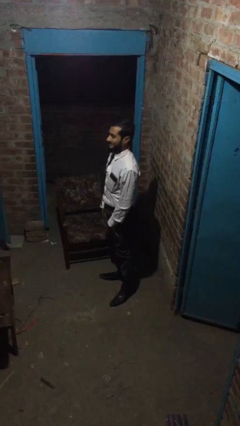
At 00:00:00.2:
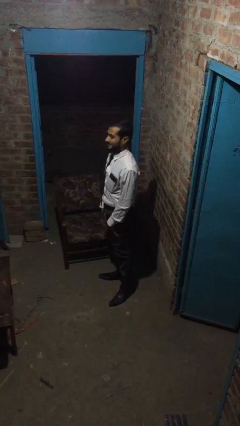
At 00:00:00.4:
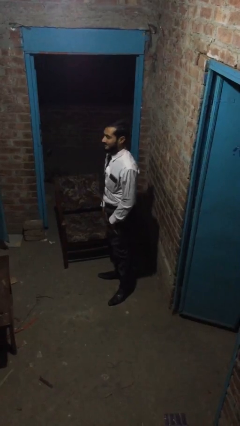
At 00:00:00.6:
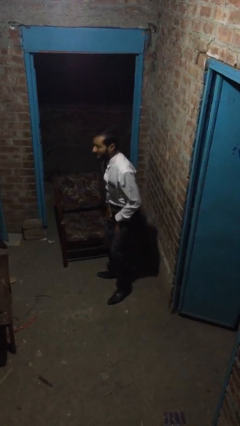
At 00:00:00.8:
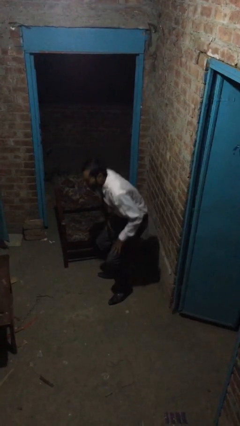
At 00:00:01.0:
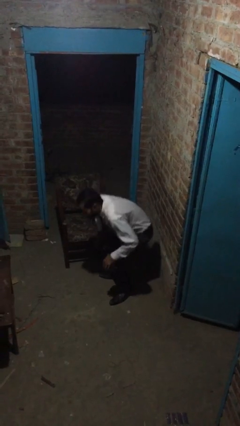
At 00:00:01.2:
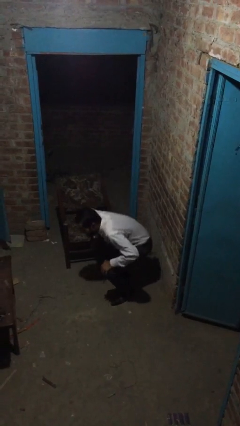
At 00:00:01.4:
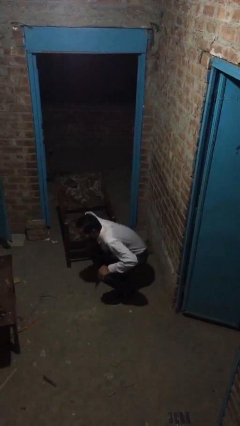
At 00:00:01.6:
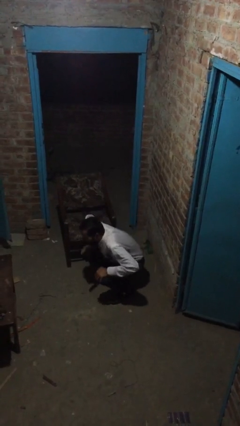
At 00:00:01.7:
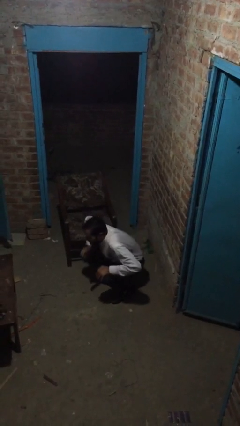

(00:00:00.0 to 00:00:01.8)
person sits down

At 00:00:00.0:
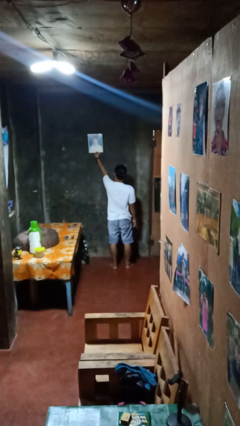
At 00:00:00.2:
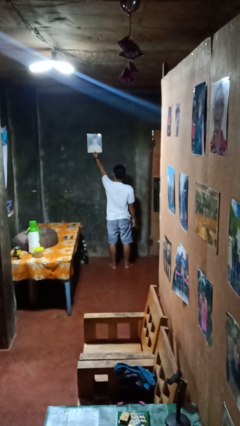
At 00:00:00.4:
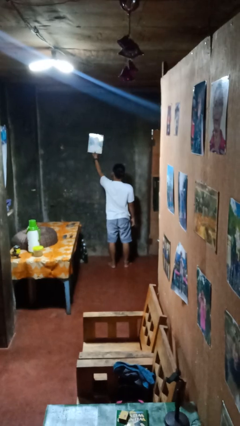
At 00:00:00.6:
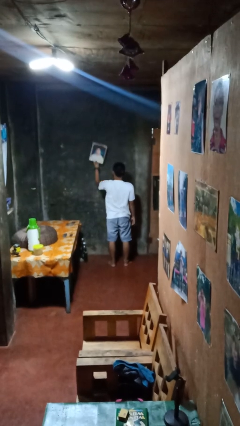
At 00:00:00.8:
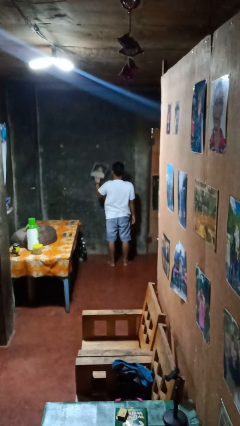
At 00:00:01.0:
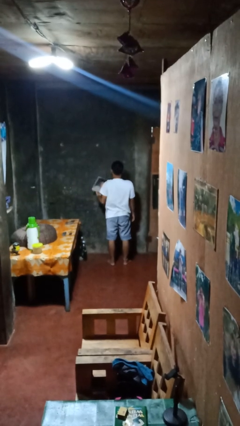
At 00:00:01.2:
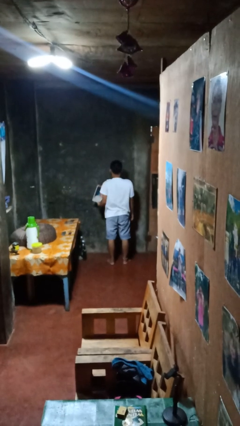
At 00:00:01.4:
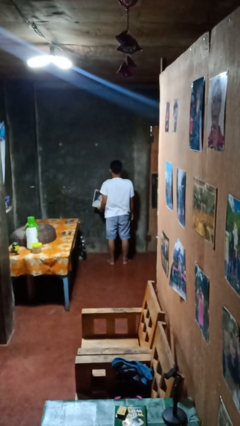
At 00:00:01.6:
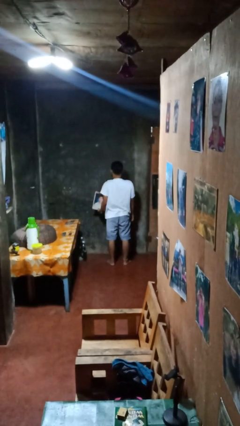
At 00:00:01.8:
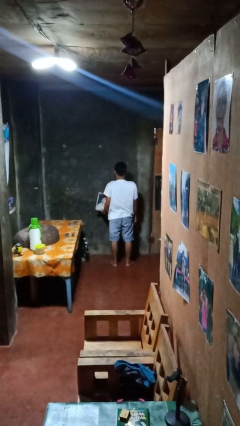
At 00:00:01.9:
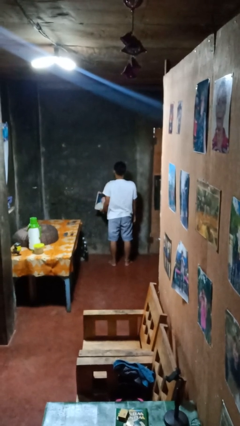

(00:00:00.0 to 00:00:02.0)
person takes down picture frame

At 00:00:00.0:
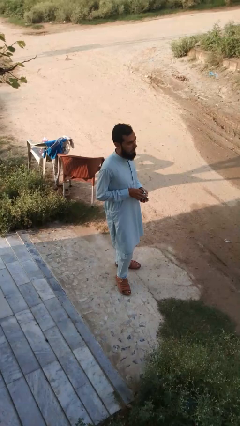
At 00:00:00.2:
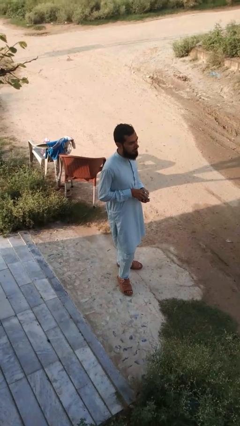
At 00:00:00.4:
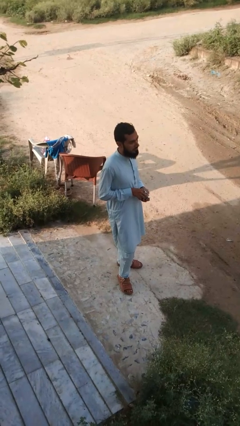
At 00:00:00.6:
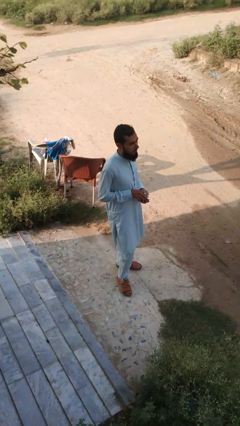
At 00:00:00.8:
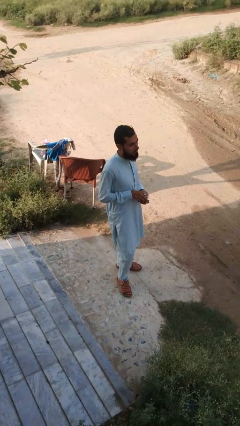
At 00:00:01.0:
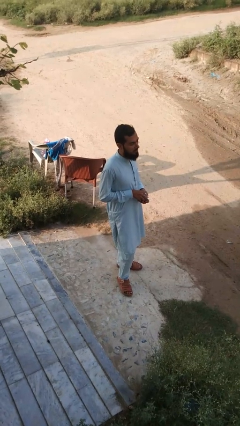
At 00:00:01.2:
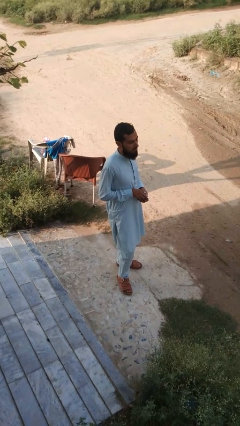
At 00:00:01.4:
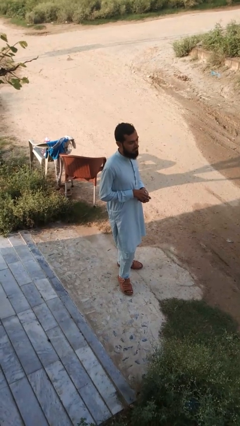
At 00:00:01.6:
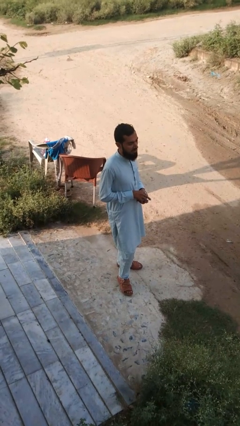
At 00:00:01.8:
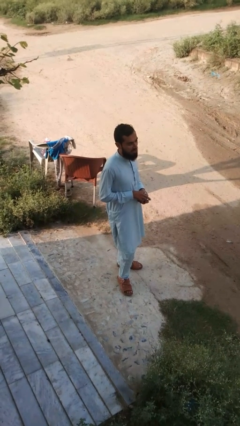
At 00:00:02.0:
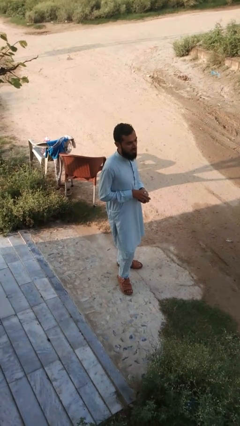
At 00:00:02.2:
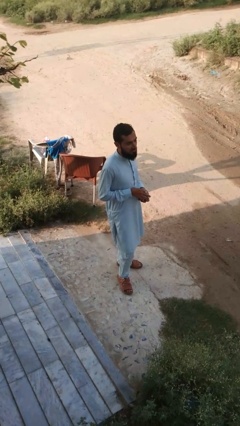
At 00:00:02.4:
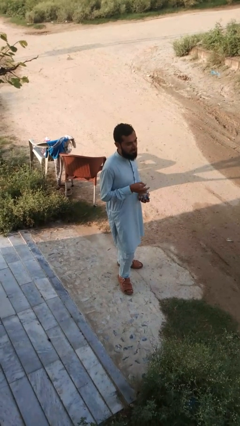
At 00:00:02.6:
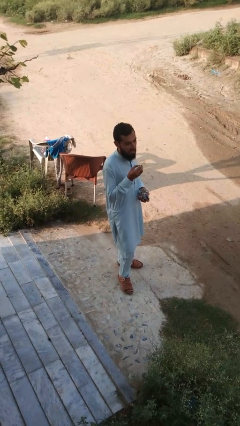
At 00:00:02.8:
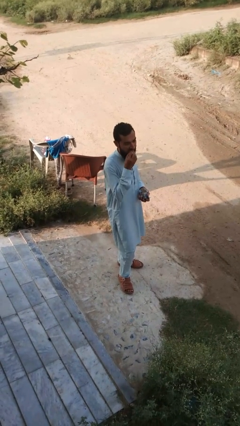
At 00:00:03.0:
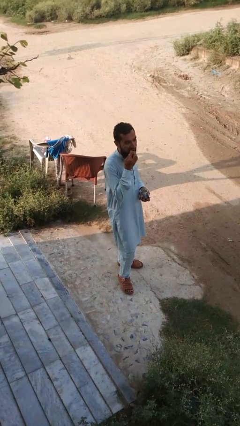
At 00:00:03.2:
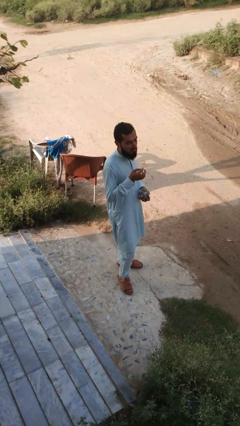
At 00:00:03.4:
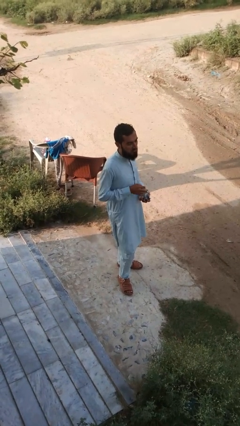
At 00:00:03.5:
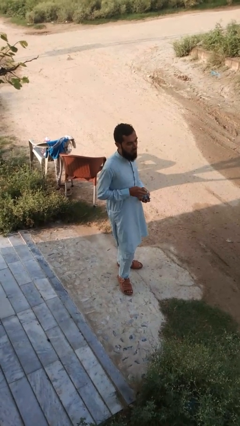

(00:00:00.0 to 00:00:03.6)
person eats snack from bag

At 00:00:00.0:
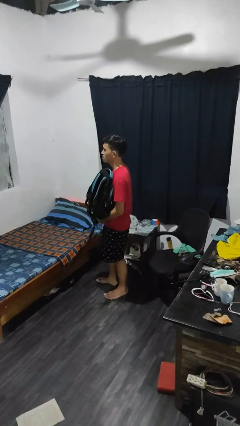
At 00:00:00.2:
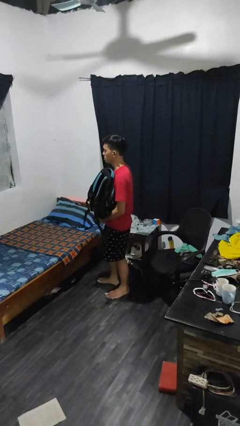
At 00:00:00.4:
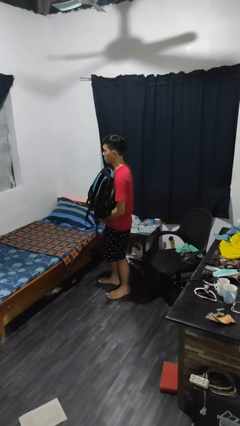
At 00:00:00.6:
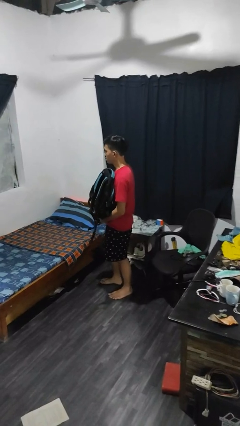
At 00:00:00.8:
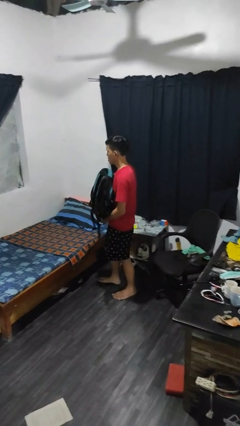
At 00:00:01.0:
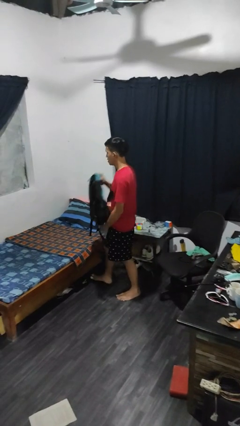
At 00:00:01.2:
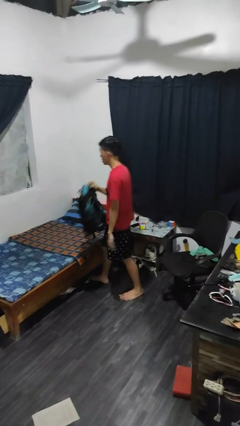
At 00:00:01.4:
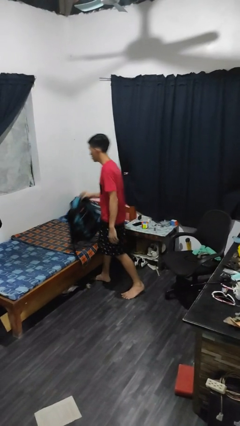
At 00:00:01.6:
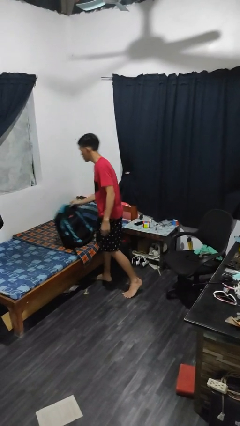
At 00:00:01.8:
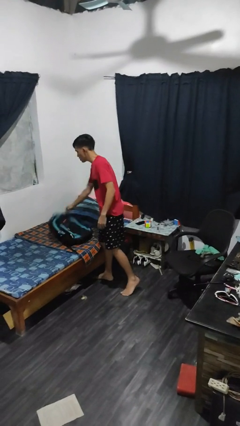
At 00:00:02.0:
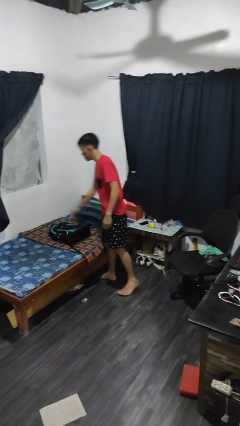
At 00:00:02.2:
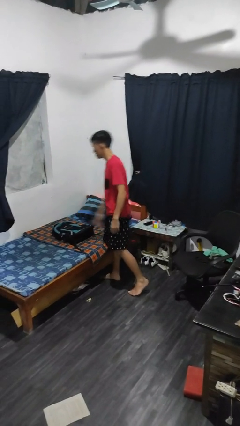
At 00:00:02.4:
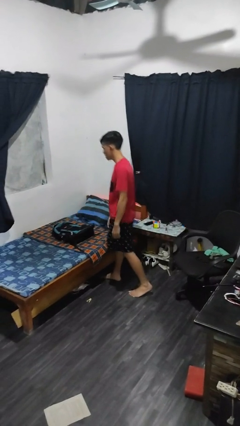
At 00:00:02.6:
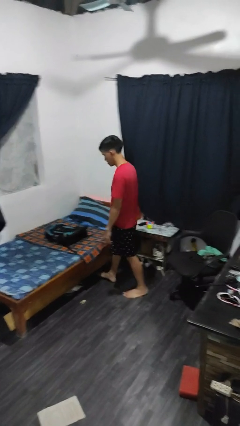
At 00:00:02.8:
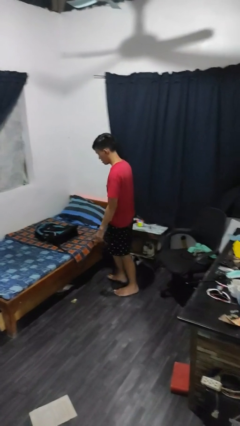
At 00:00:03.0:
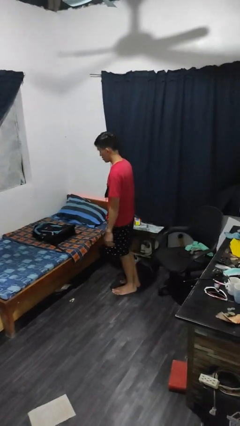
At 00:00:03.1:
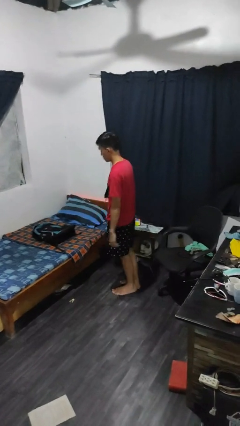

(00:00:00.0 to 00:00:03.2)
person puts down object on bed

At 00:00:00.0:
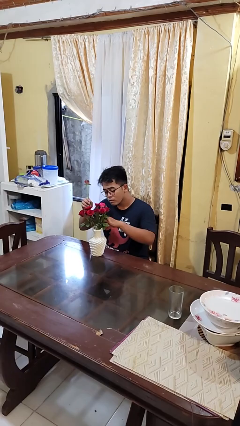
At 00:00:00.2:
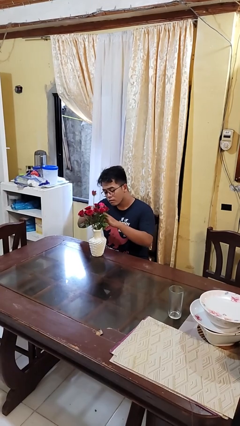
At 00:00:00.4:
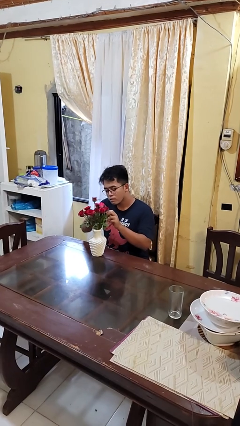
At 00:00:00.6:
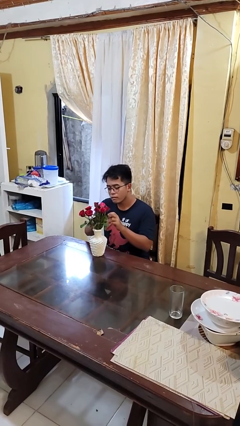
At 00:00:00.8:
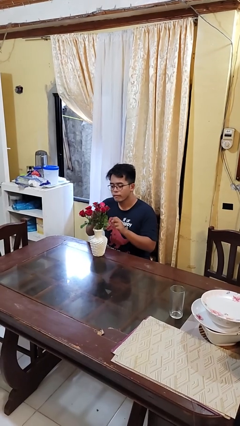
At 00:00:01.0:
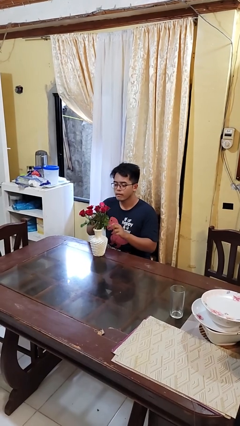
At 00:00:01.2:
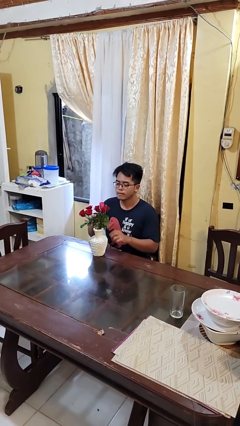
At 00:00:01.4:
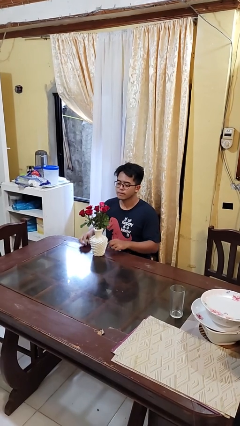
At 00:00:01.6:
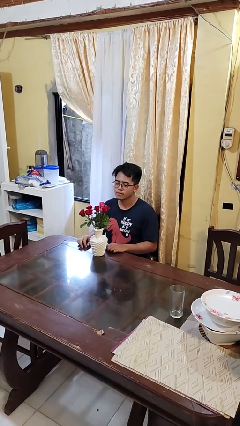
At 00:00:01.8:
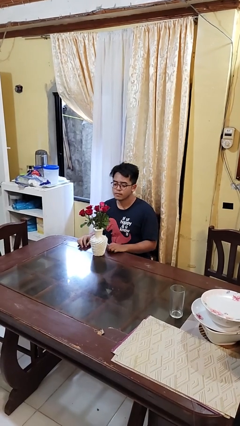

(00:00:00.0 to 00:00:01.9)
person arranges flowers in vase

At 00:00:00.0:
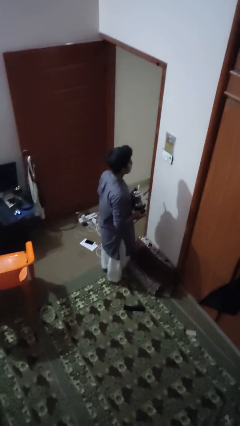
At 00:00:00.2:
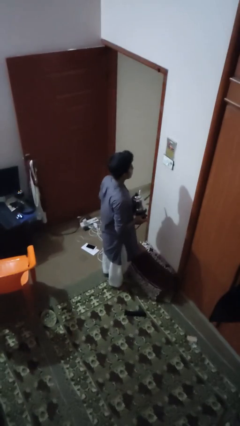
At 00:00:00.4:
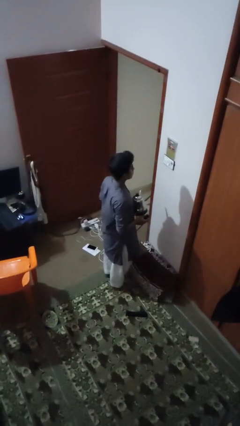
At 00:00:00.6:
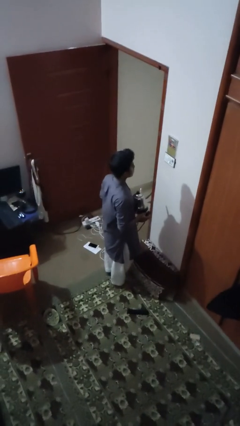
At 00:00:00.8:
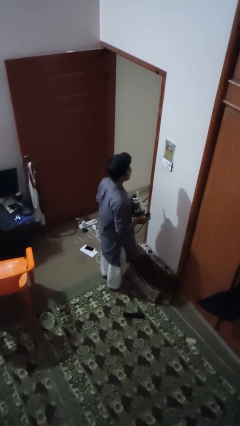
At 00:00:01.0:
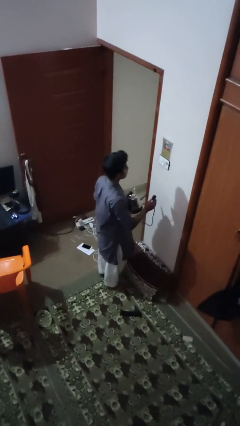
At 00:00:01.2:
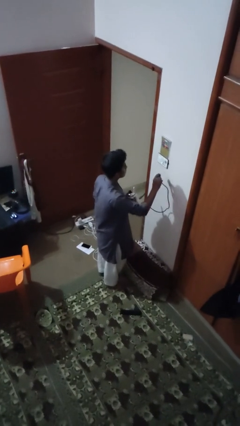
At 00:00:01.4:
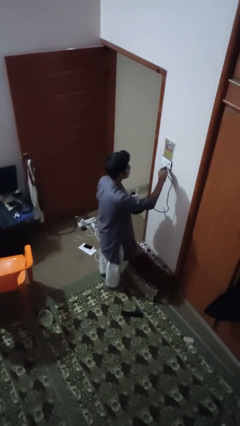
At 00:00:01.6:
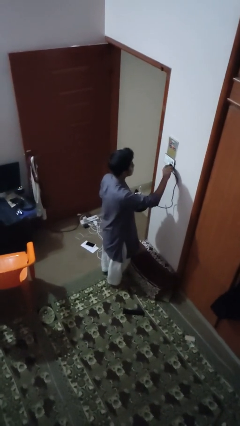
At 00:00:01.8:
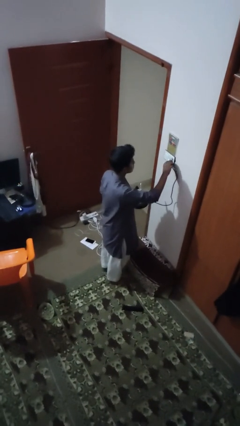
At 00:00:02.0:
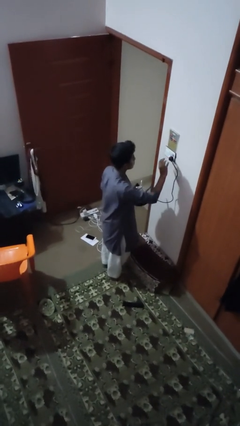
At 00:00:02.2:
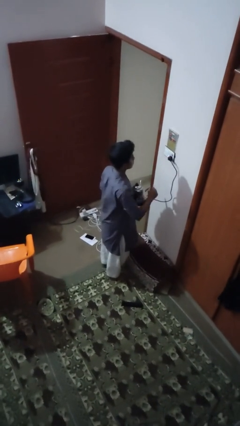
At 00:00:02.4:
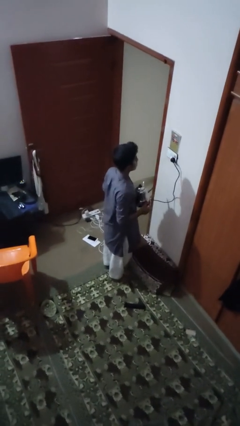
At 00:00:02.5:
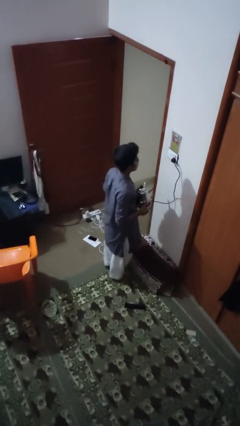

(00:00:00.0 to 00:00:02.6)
person plugs into electrical socket

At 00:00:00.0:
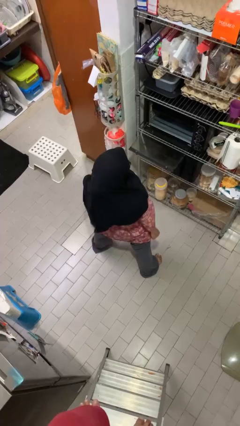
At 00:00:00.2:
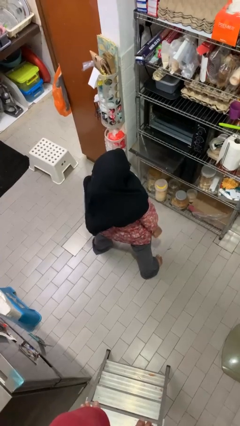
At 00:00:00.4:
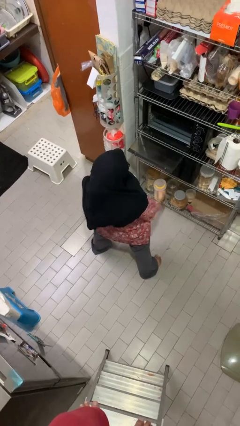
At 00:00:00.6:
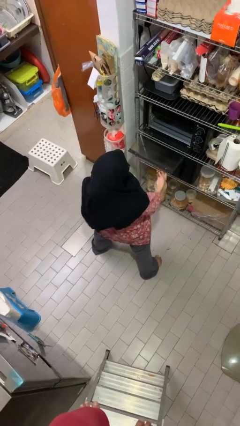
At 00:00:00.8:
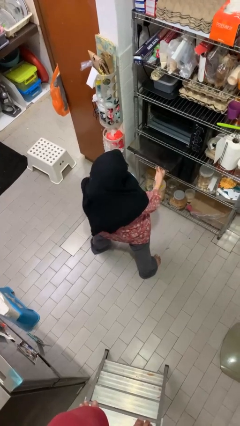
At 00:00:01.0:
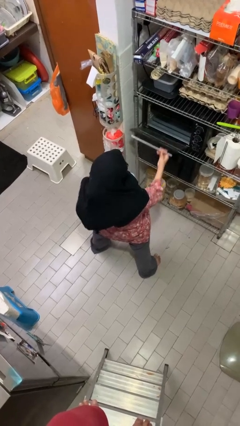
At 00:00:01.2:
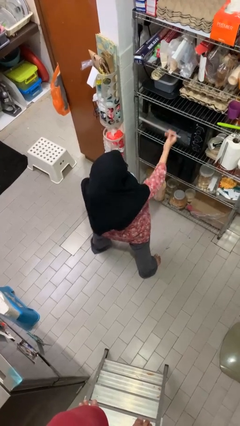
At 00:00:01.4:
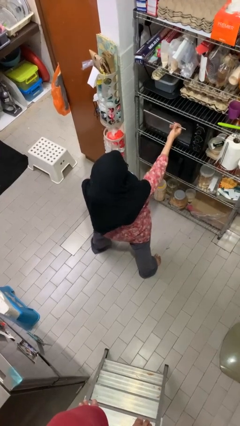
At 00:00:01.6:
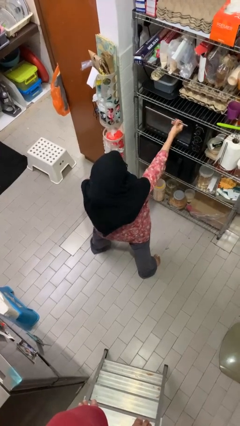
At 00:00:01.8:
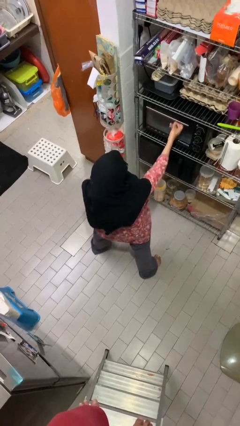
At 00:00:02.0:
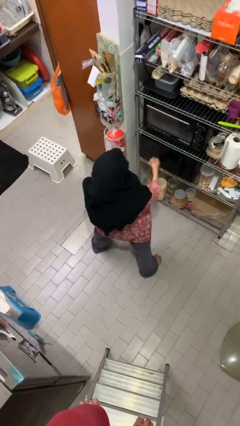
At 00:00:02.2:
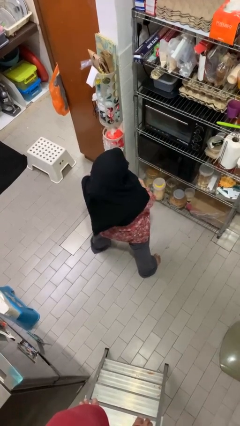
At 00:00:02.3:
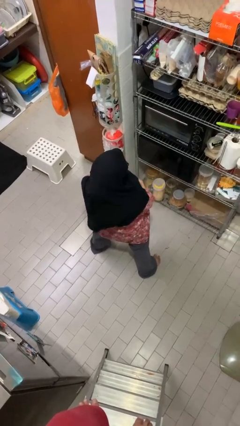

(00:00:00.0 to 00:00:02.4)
person closes oven door
